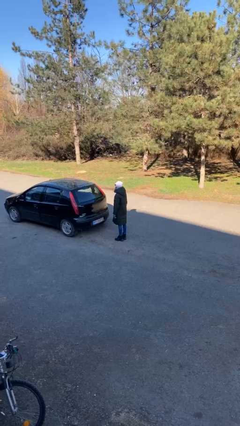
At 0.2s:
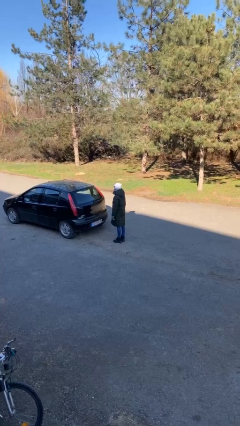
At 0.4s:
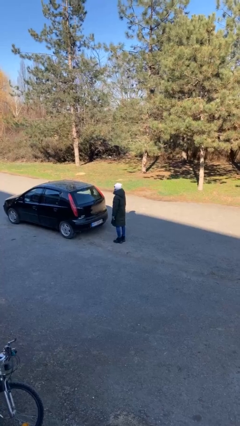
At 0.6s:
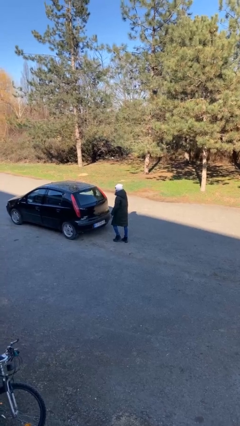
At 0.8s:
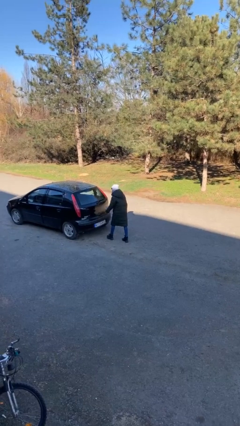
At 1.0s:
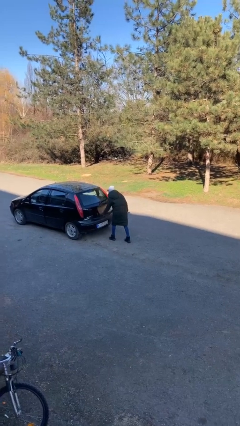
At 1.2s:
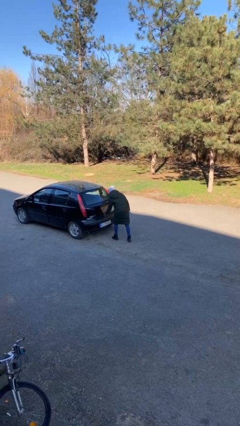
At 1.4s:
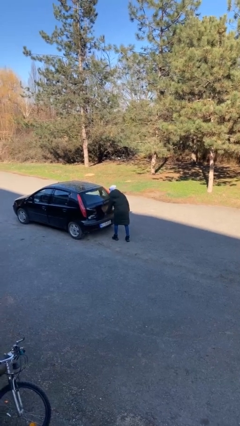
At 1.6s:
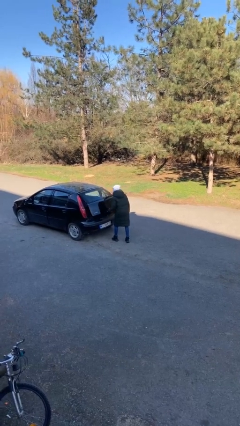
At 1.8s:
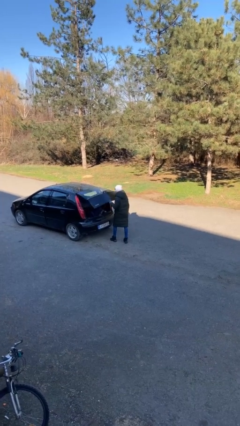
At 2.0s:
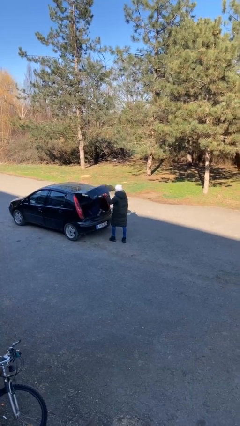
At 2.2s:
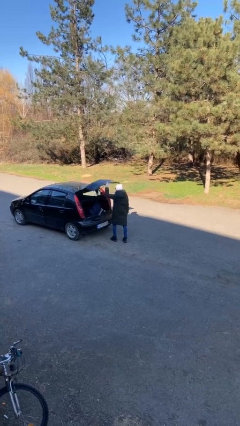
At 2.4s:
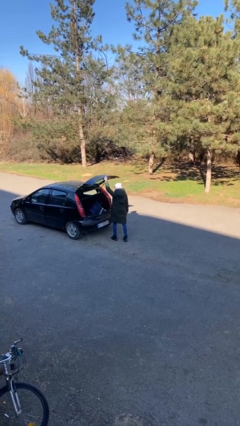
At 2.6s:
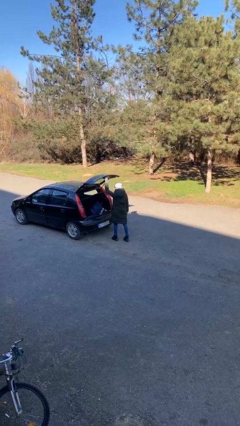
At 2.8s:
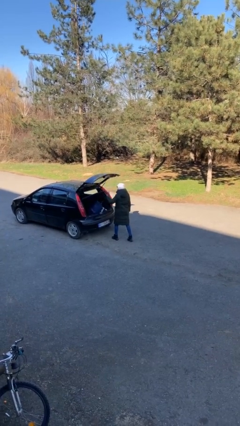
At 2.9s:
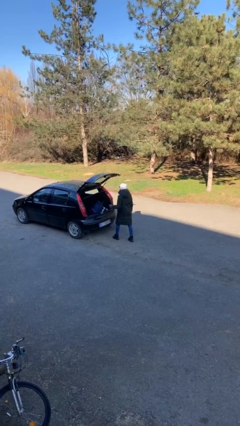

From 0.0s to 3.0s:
person opens car trunk

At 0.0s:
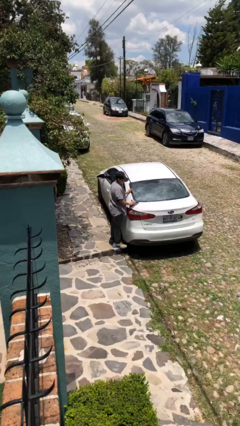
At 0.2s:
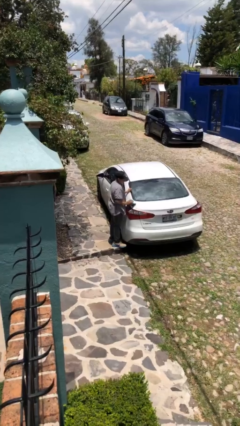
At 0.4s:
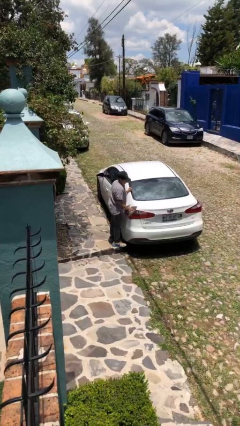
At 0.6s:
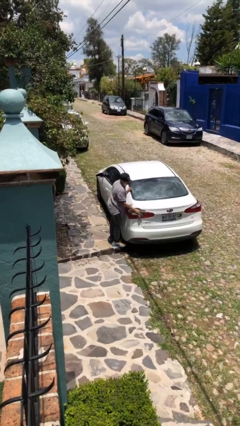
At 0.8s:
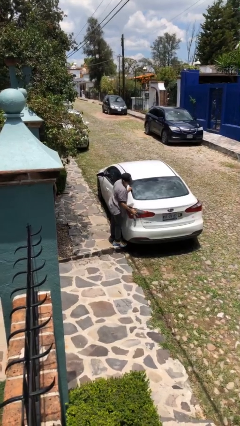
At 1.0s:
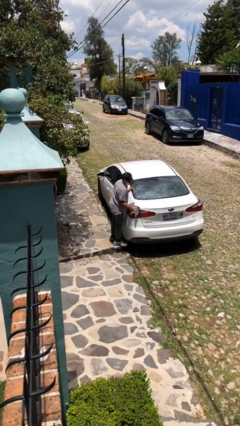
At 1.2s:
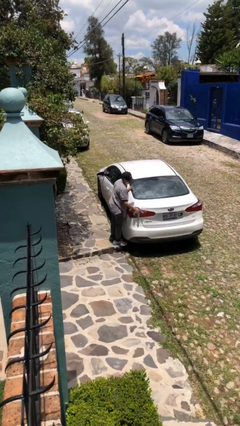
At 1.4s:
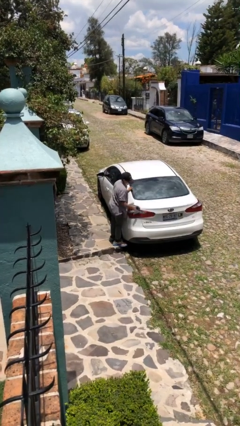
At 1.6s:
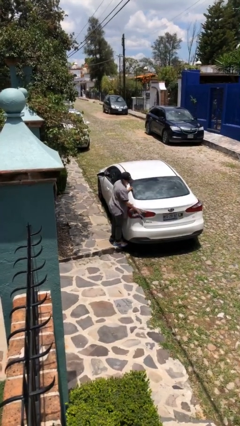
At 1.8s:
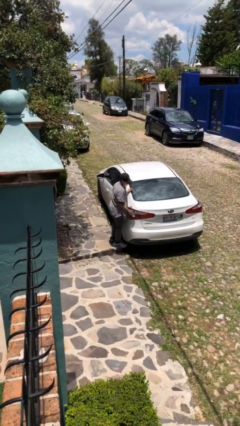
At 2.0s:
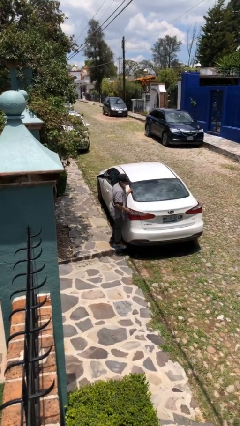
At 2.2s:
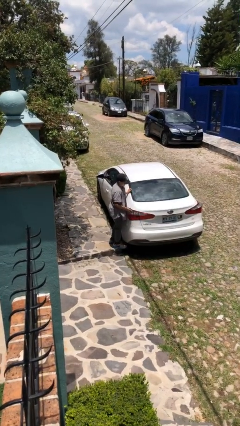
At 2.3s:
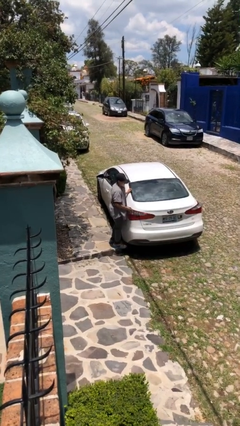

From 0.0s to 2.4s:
person polishes car with rag

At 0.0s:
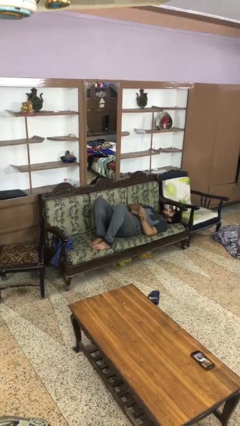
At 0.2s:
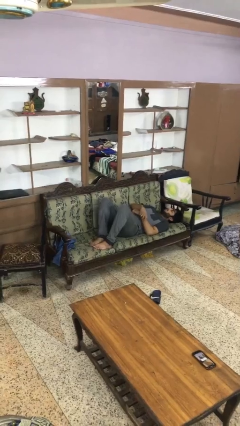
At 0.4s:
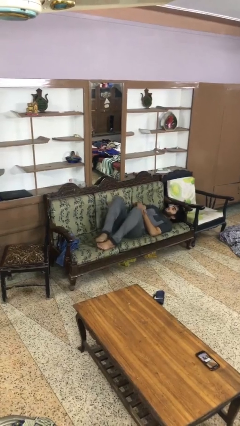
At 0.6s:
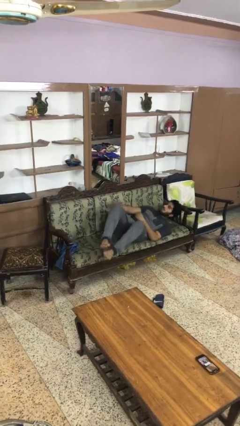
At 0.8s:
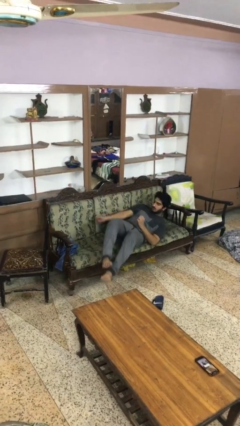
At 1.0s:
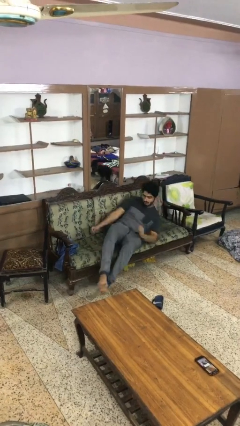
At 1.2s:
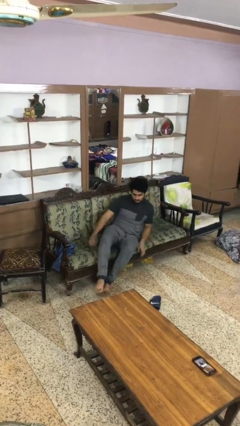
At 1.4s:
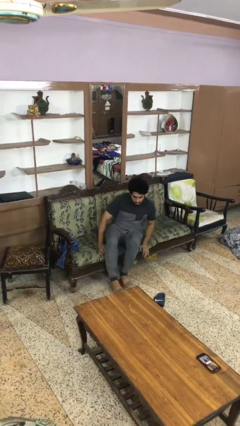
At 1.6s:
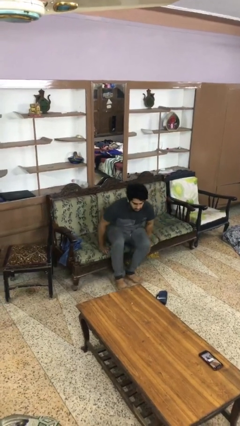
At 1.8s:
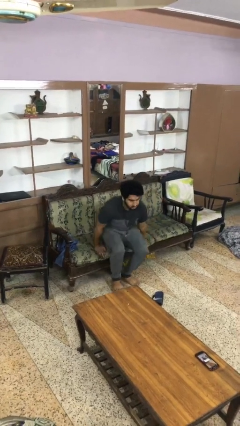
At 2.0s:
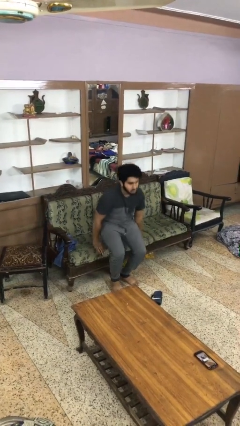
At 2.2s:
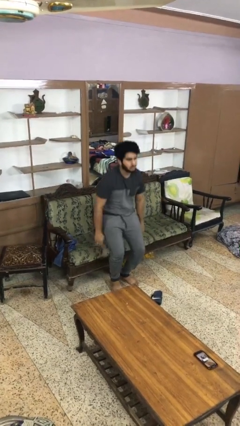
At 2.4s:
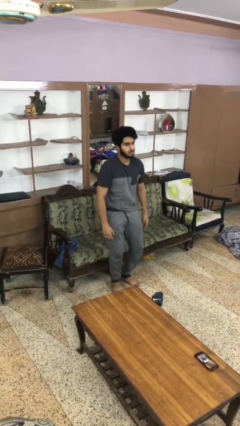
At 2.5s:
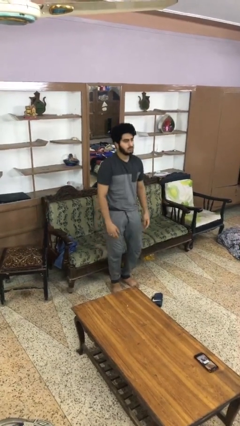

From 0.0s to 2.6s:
person stands up

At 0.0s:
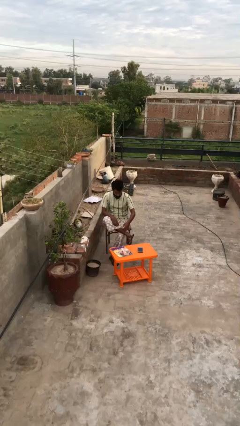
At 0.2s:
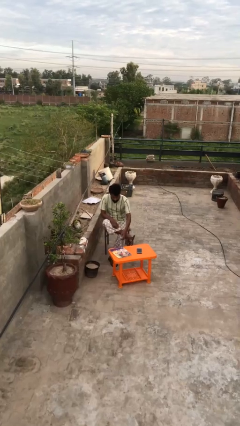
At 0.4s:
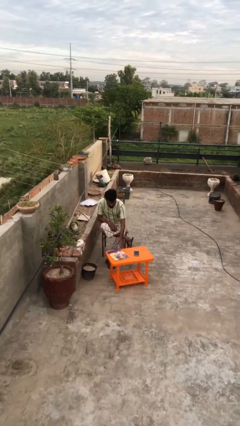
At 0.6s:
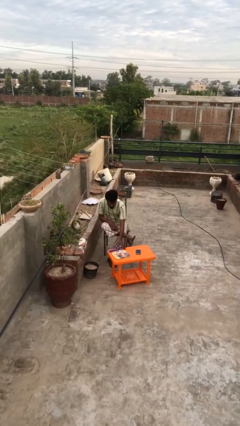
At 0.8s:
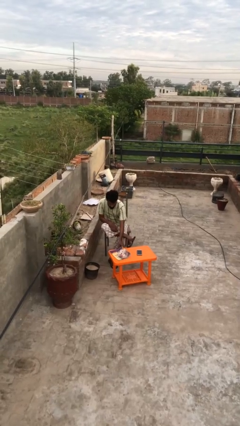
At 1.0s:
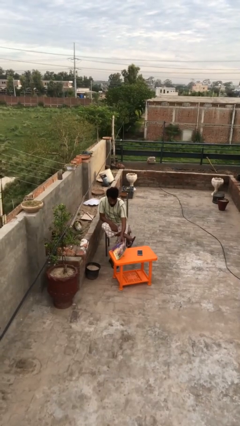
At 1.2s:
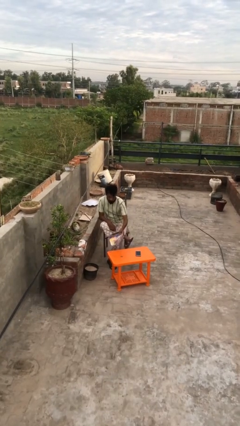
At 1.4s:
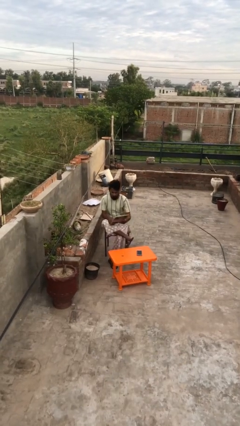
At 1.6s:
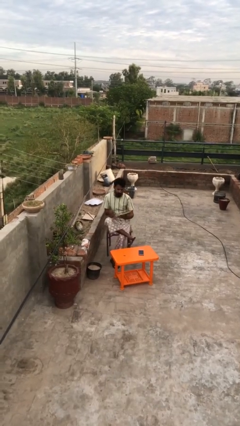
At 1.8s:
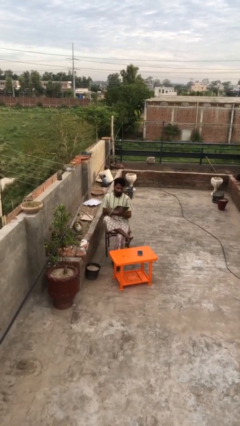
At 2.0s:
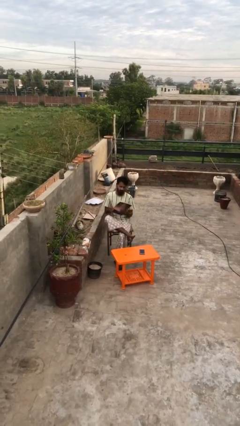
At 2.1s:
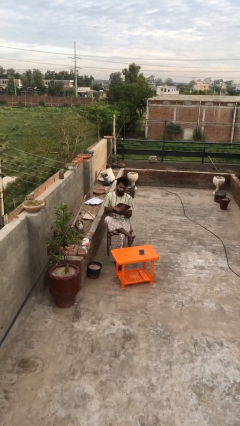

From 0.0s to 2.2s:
person picks up object from table

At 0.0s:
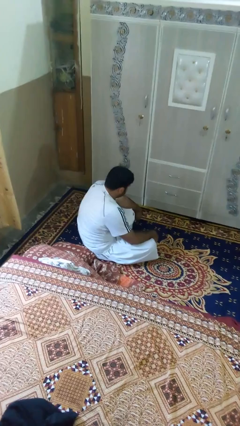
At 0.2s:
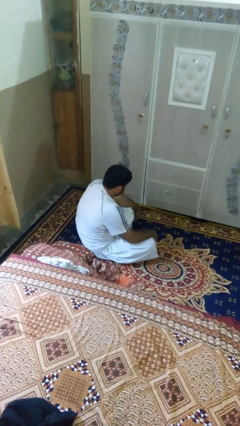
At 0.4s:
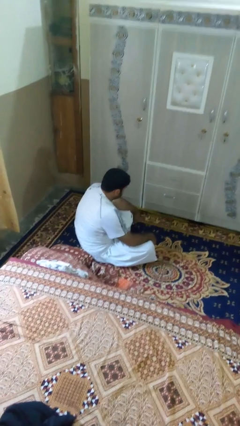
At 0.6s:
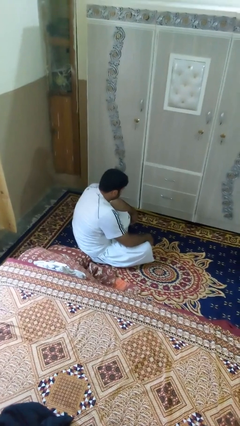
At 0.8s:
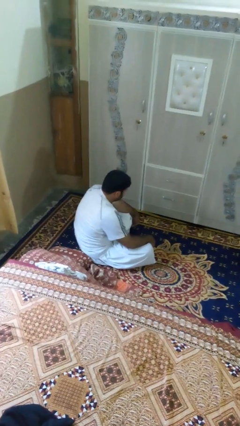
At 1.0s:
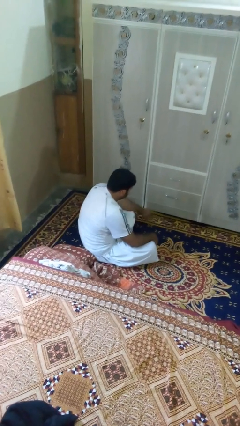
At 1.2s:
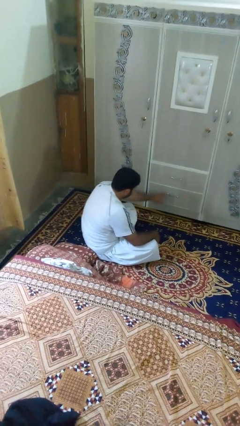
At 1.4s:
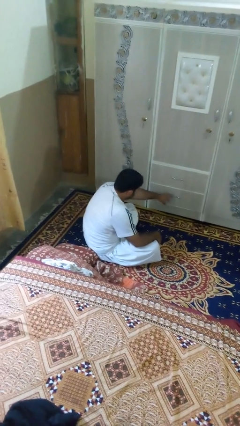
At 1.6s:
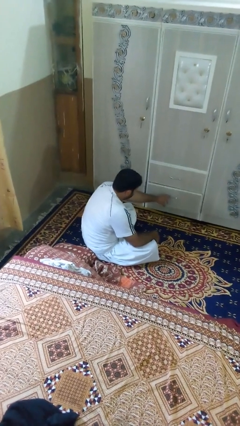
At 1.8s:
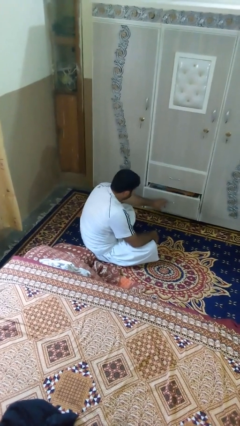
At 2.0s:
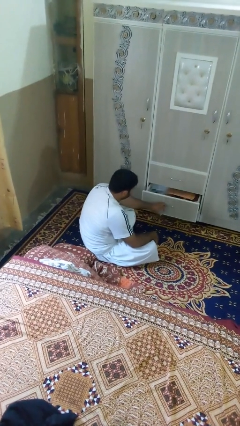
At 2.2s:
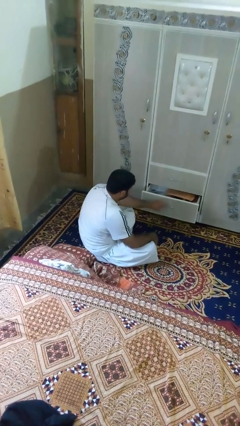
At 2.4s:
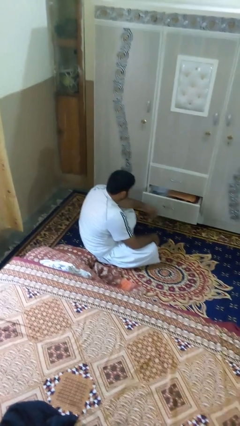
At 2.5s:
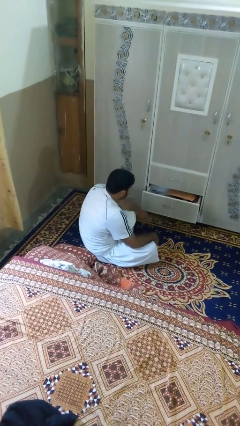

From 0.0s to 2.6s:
person opens dresser drawer

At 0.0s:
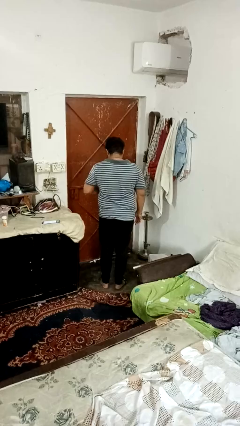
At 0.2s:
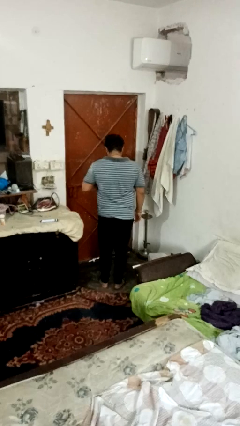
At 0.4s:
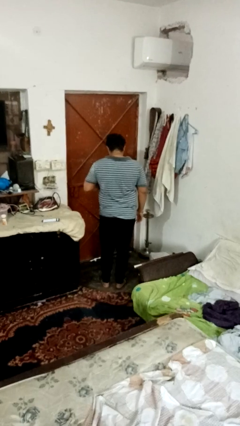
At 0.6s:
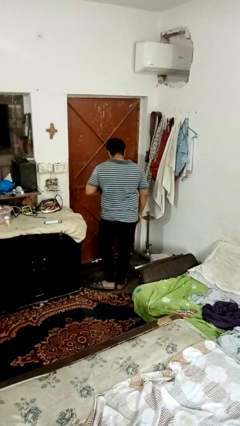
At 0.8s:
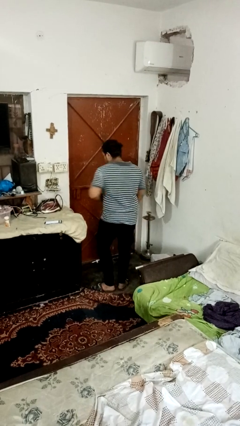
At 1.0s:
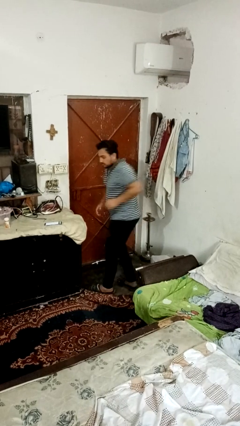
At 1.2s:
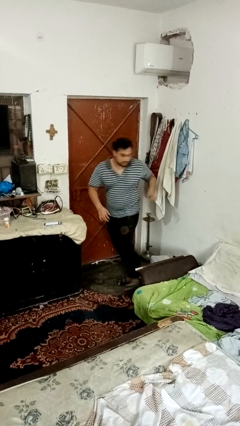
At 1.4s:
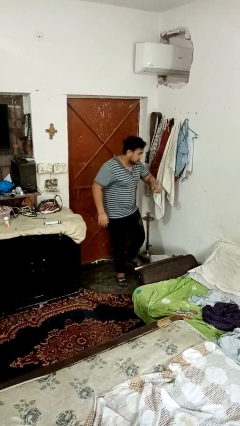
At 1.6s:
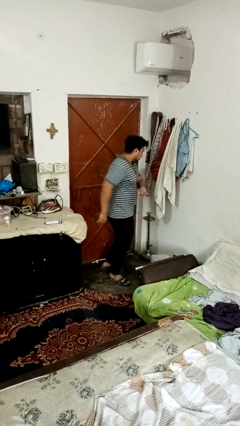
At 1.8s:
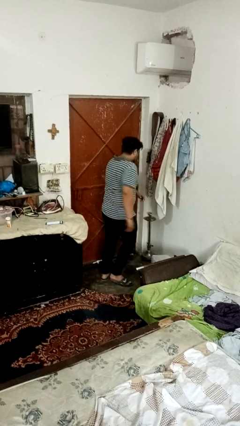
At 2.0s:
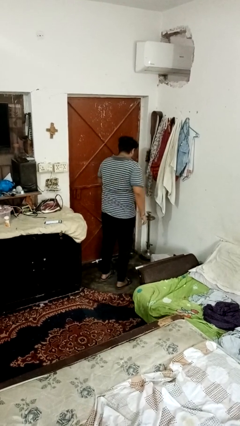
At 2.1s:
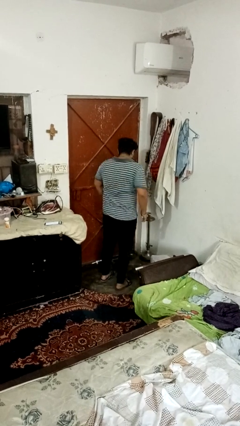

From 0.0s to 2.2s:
person twirls

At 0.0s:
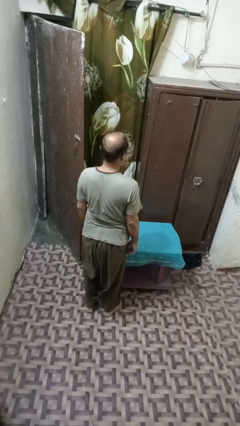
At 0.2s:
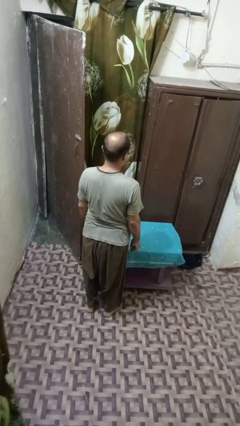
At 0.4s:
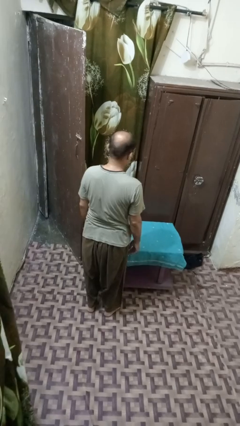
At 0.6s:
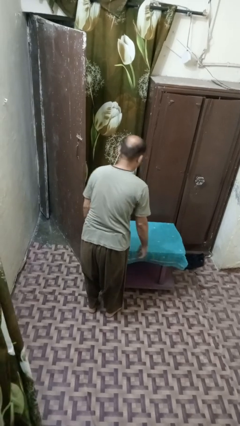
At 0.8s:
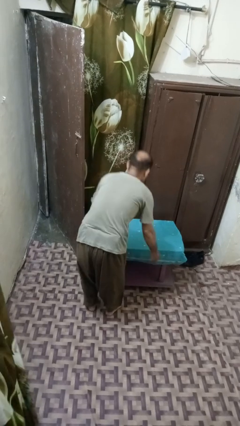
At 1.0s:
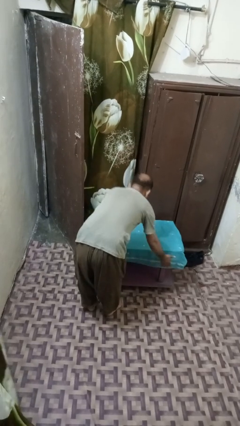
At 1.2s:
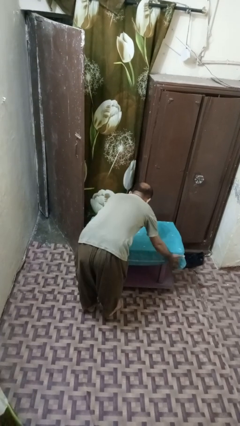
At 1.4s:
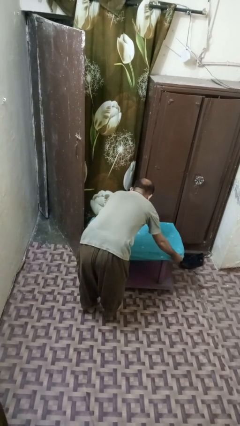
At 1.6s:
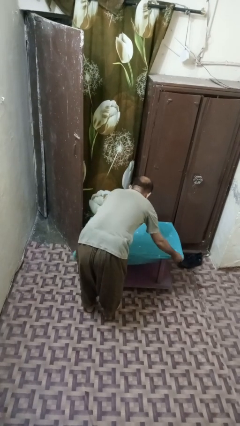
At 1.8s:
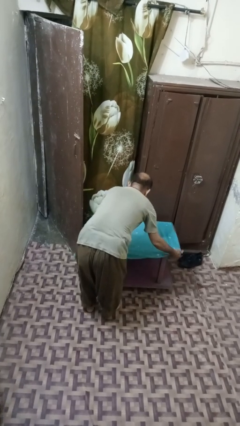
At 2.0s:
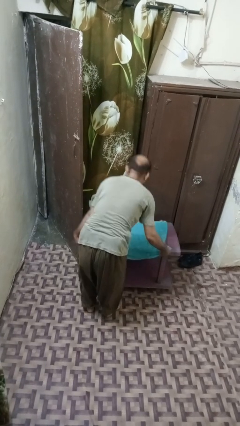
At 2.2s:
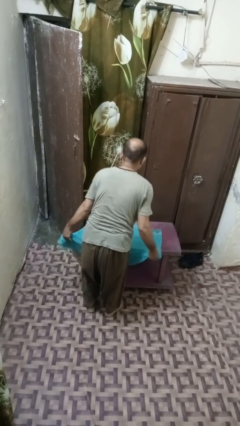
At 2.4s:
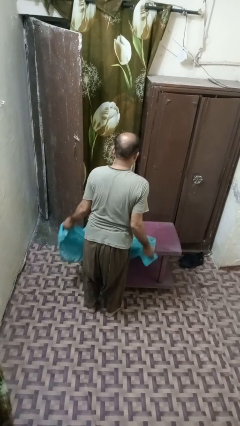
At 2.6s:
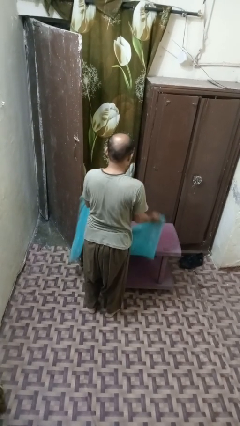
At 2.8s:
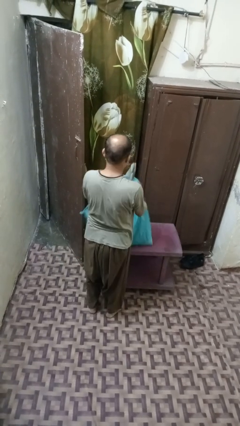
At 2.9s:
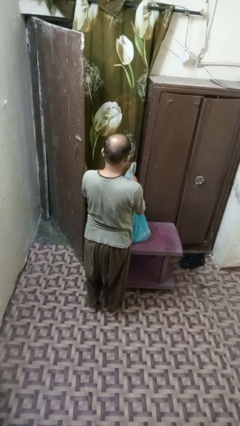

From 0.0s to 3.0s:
person folds tablecloth
